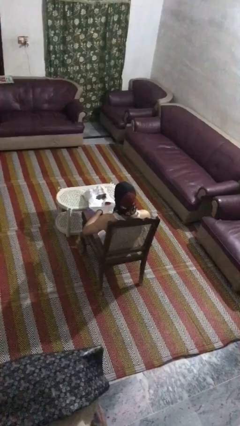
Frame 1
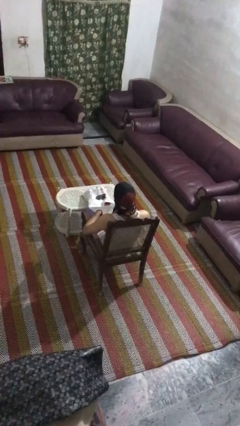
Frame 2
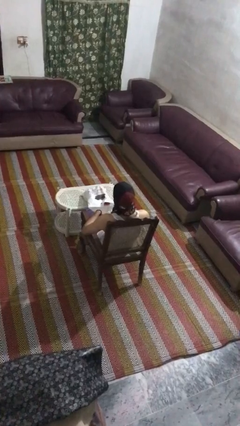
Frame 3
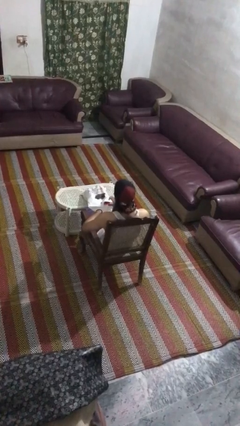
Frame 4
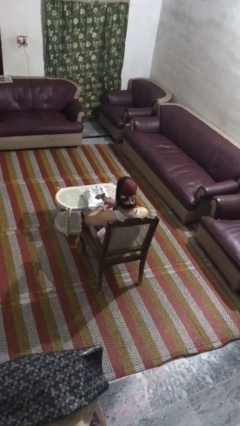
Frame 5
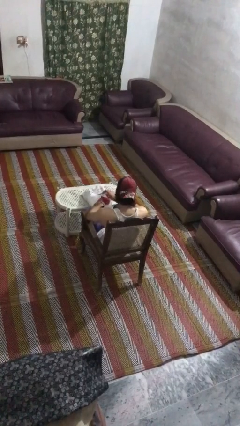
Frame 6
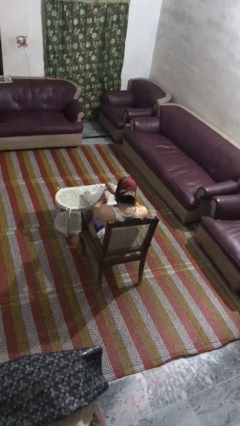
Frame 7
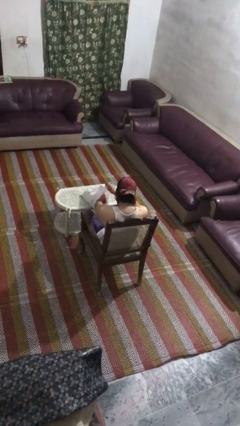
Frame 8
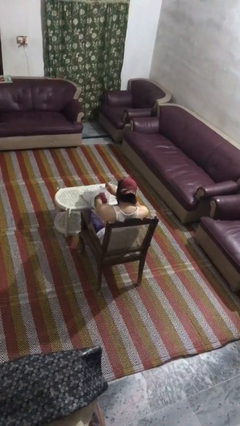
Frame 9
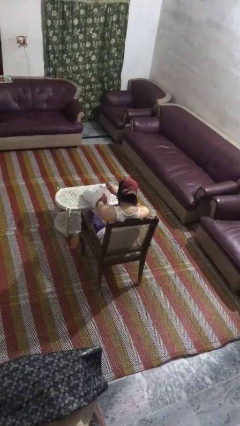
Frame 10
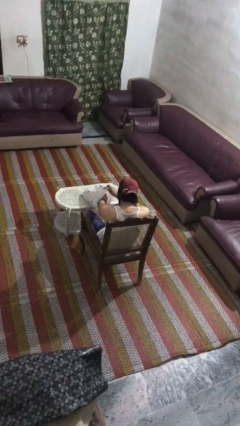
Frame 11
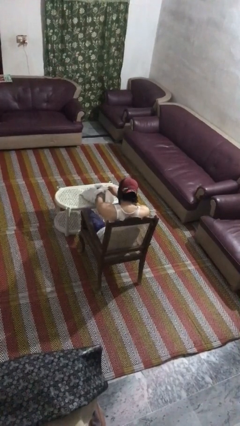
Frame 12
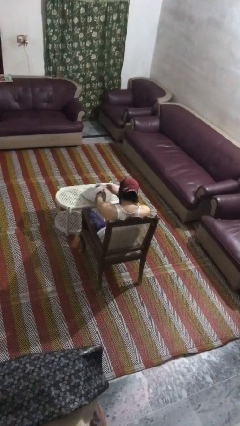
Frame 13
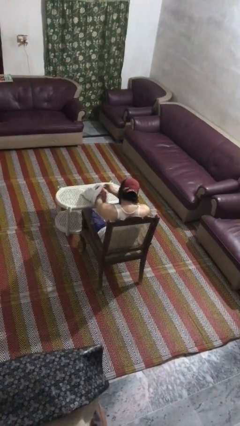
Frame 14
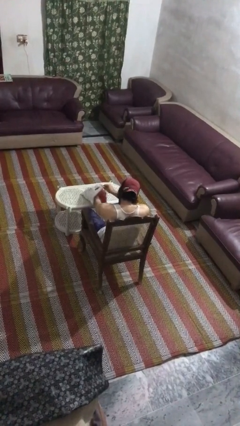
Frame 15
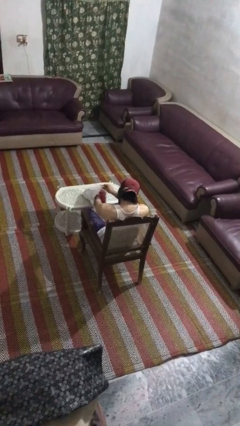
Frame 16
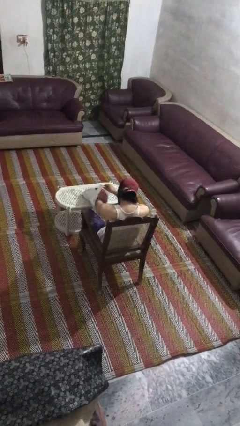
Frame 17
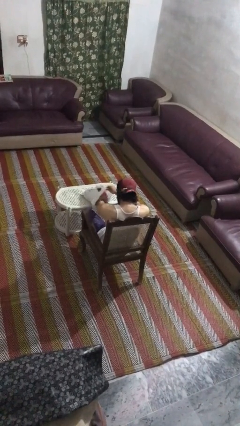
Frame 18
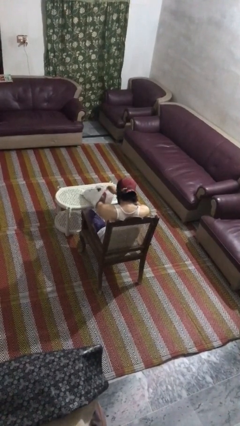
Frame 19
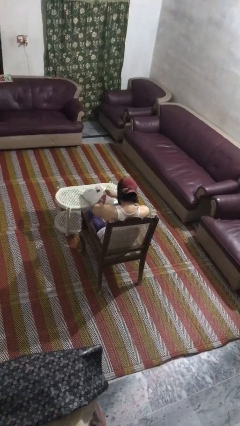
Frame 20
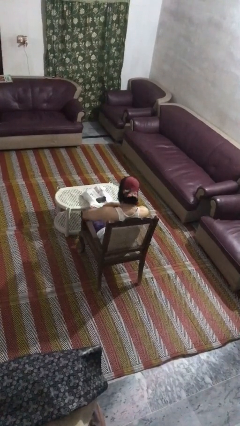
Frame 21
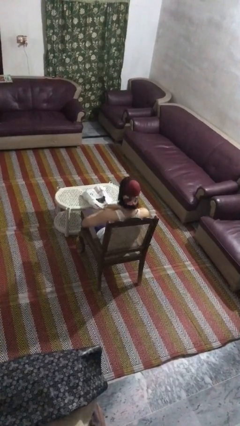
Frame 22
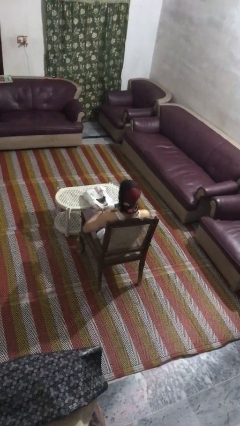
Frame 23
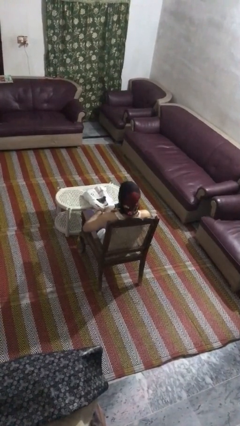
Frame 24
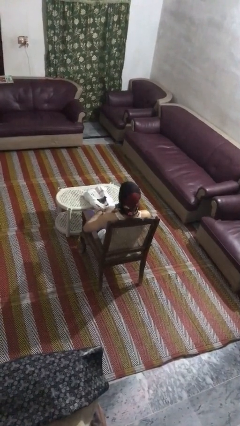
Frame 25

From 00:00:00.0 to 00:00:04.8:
person searches in bag

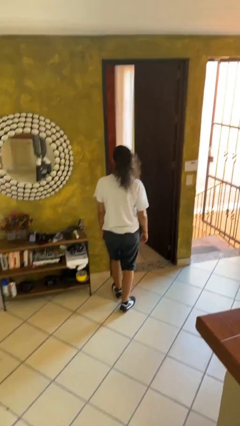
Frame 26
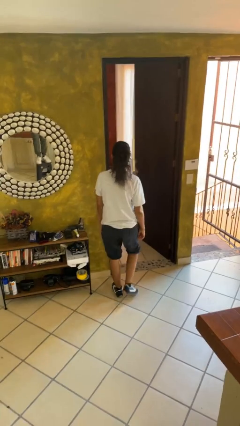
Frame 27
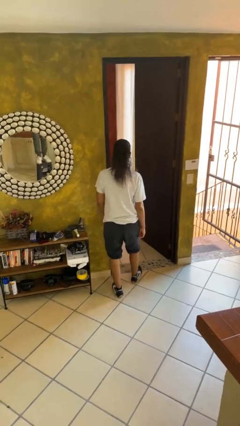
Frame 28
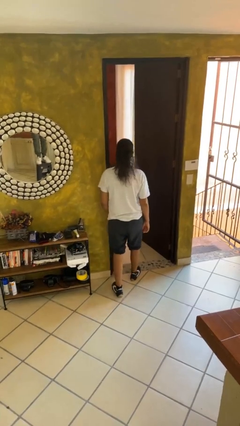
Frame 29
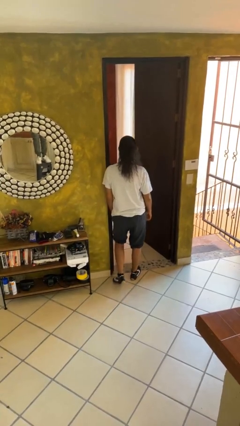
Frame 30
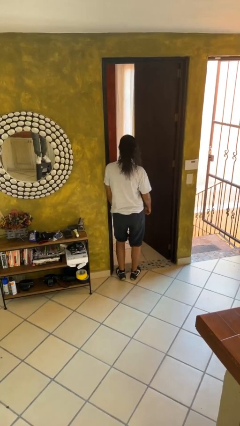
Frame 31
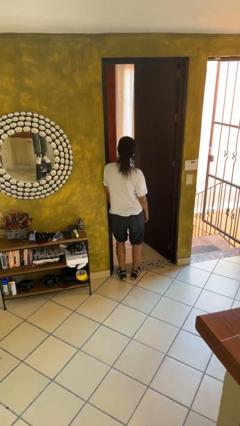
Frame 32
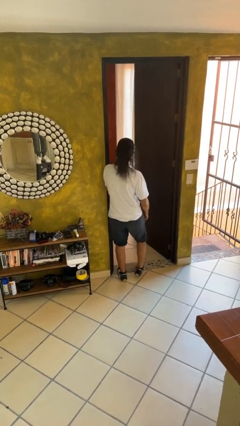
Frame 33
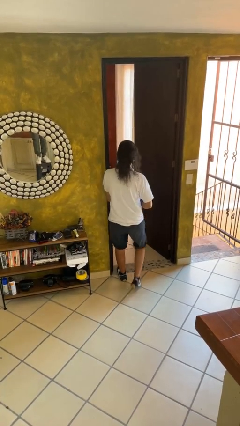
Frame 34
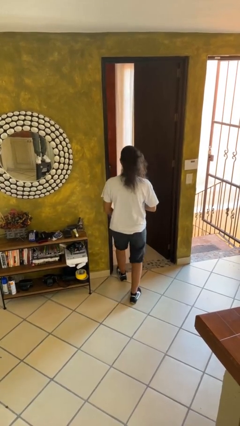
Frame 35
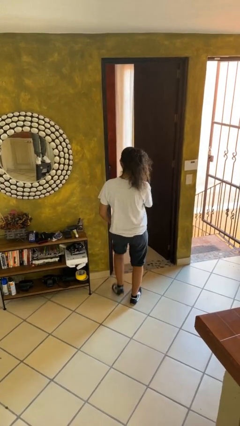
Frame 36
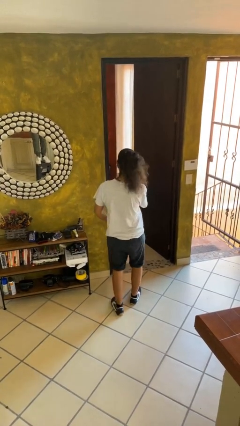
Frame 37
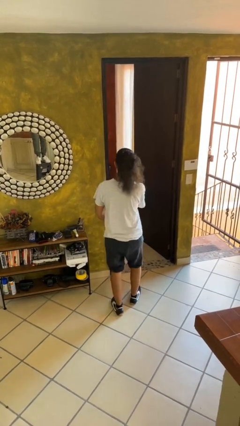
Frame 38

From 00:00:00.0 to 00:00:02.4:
person bumps into wall

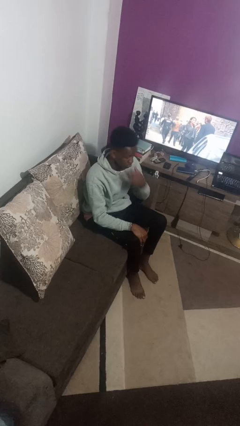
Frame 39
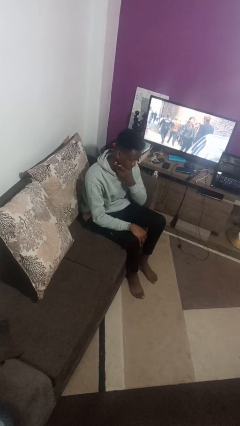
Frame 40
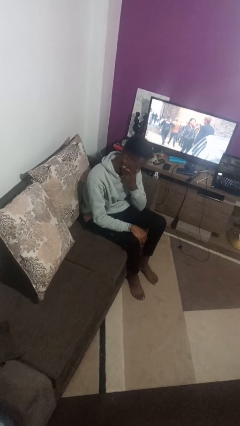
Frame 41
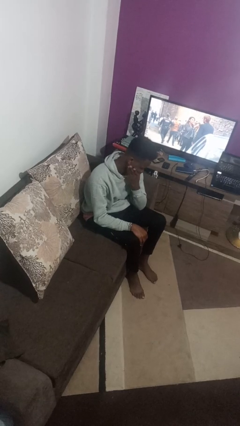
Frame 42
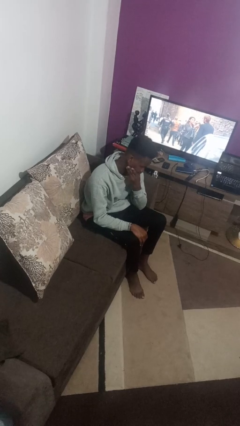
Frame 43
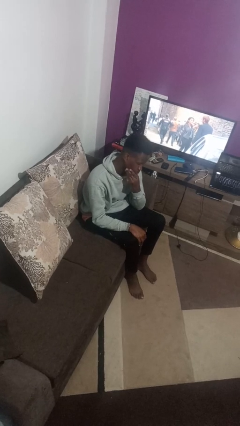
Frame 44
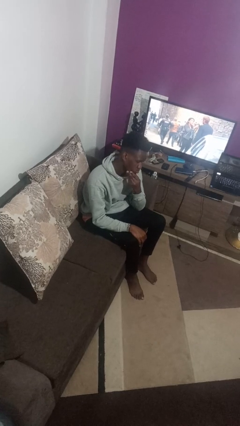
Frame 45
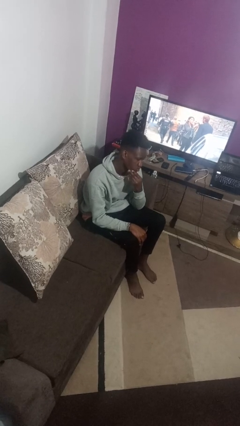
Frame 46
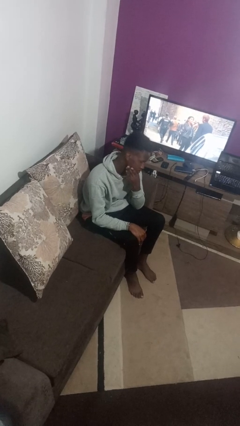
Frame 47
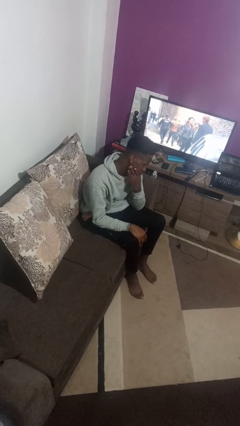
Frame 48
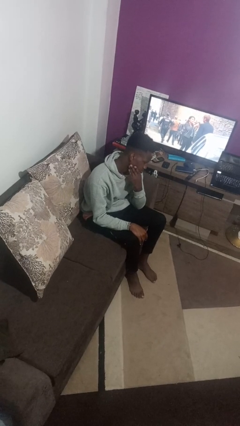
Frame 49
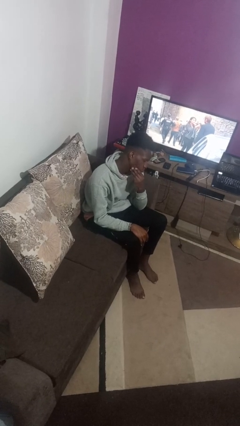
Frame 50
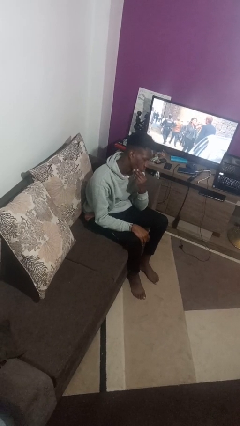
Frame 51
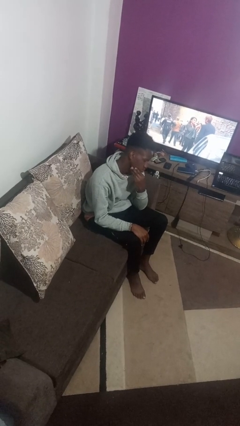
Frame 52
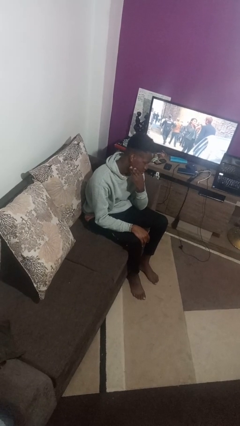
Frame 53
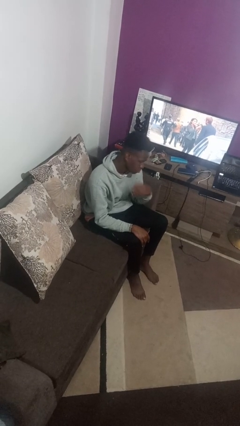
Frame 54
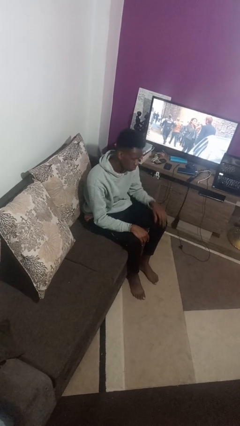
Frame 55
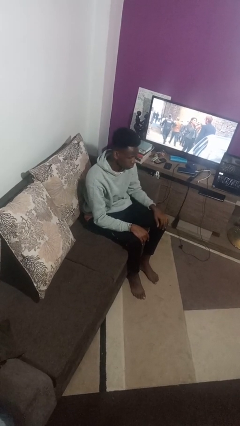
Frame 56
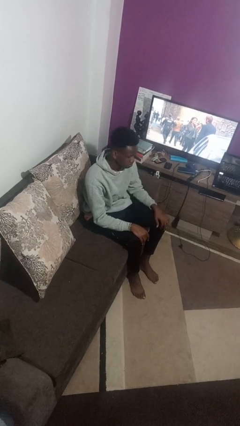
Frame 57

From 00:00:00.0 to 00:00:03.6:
person strokes chin

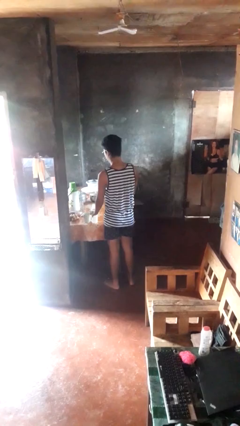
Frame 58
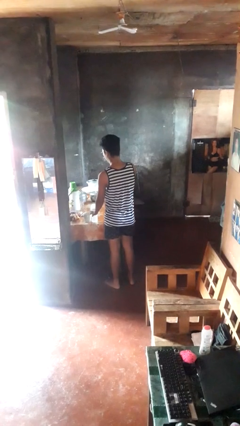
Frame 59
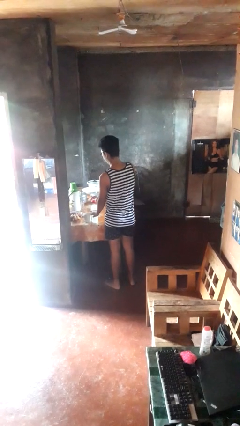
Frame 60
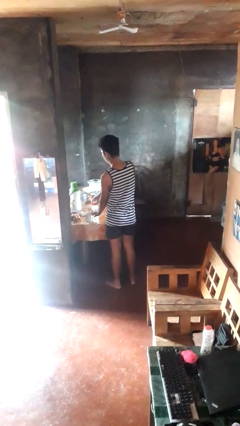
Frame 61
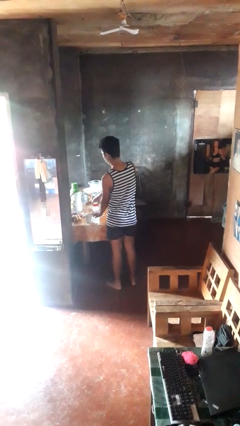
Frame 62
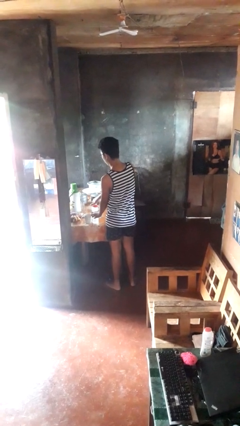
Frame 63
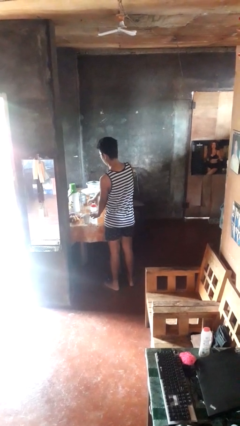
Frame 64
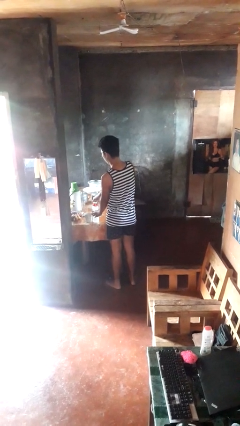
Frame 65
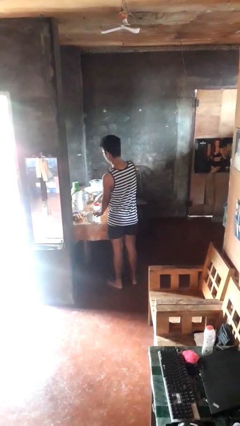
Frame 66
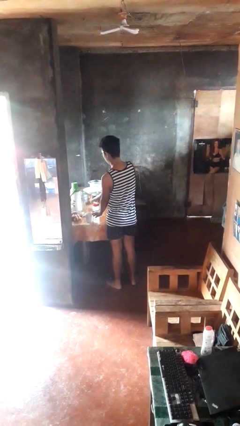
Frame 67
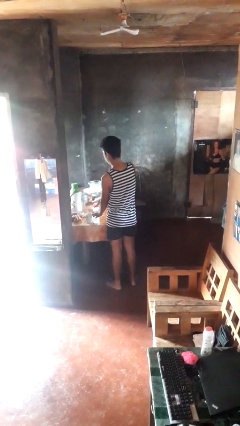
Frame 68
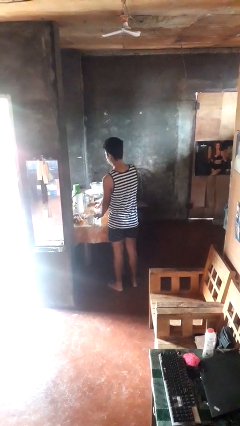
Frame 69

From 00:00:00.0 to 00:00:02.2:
person screws lid to bottle

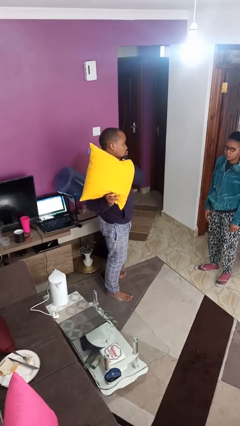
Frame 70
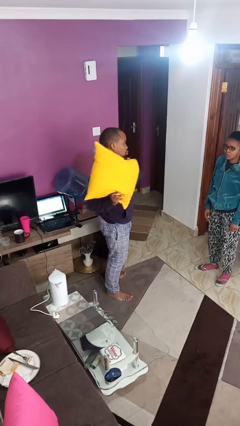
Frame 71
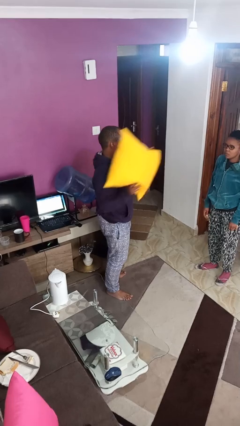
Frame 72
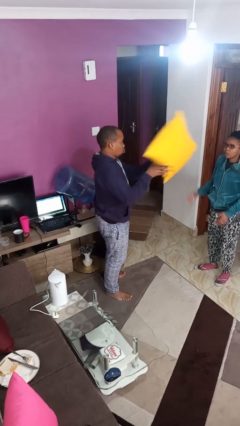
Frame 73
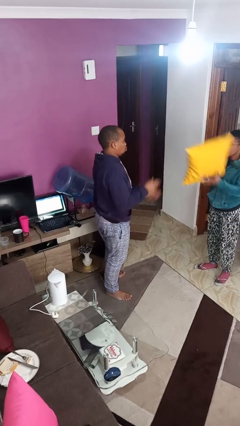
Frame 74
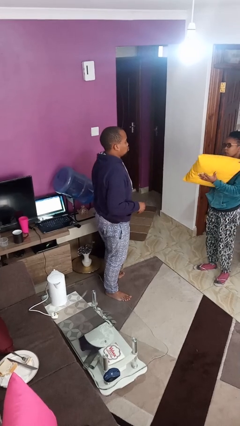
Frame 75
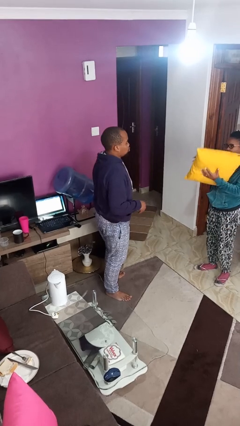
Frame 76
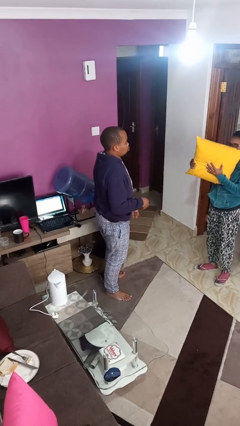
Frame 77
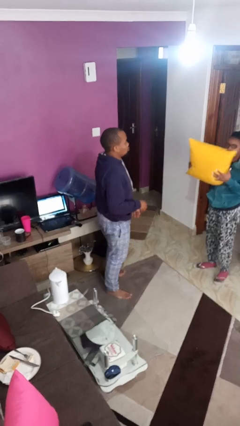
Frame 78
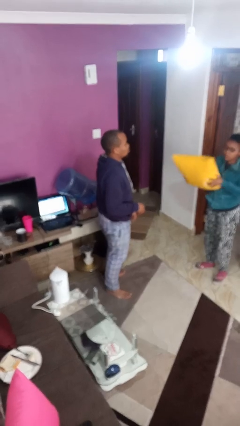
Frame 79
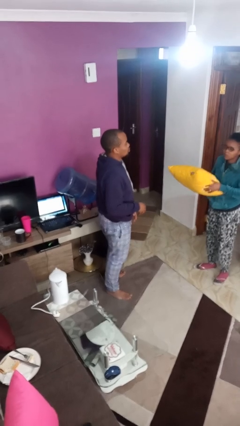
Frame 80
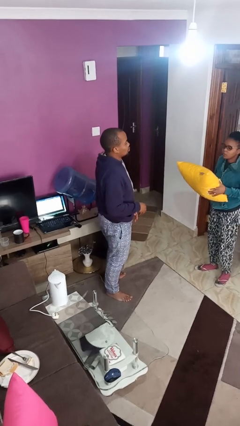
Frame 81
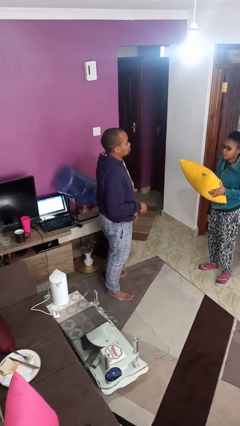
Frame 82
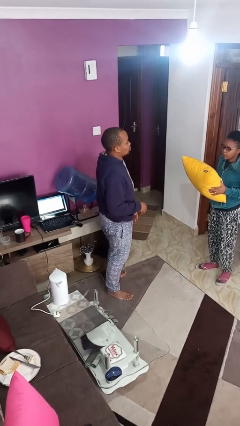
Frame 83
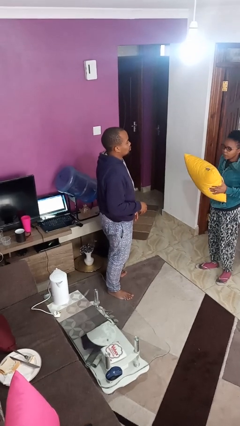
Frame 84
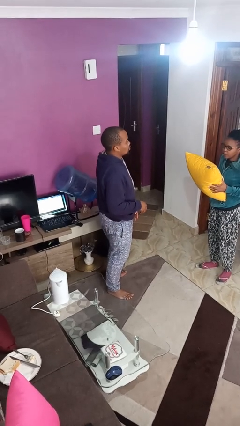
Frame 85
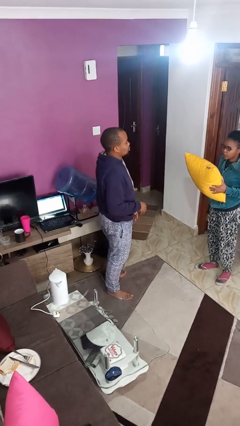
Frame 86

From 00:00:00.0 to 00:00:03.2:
person throws object to person

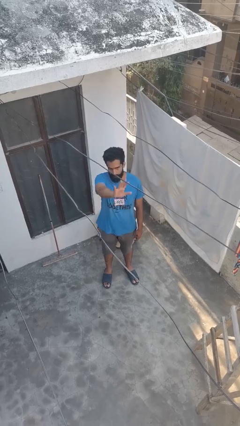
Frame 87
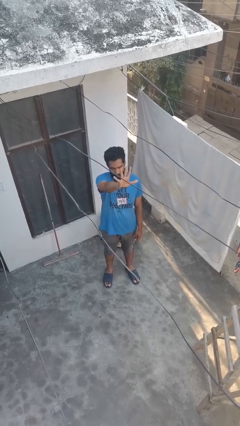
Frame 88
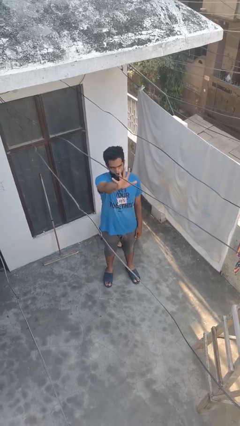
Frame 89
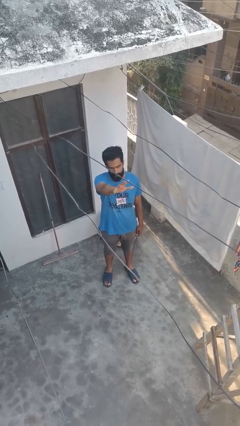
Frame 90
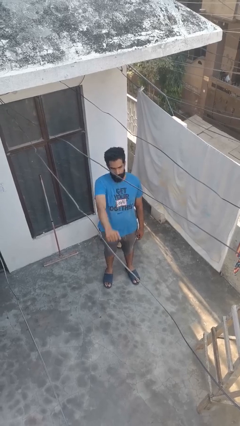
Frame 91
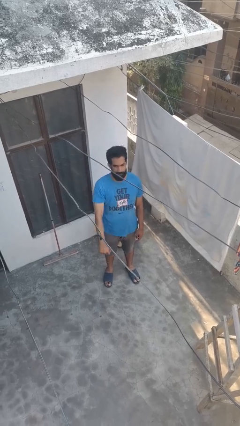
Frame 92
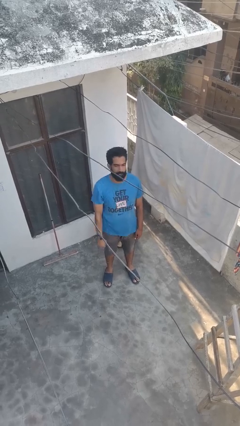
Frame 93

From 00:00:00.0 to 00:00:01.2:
person gestures number five
